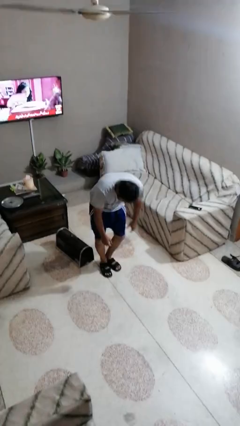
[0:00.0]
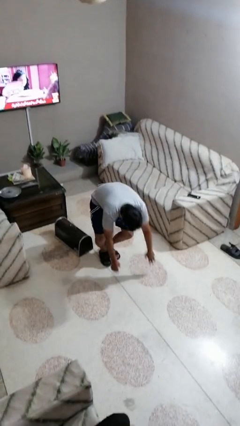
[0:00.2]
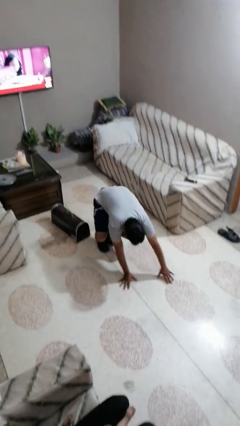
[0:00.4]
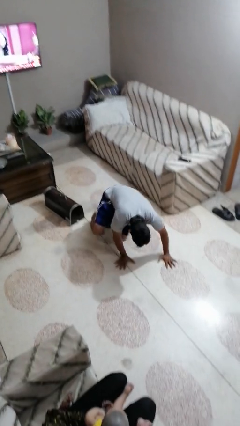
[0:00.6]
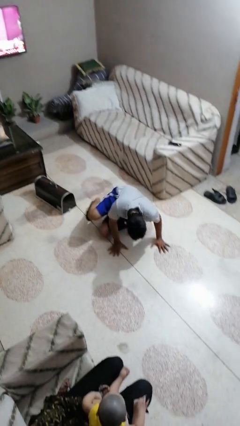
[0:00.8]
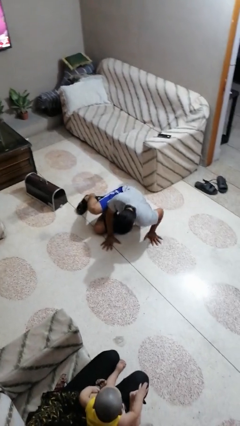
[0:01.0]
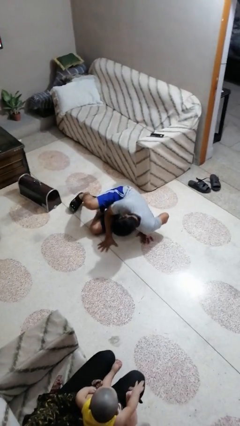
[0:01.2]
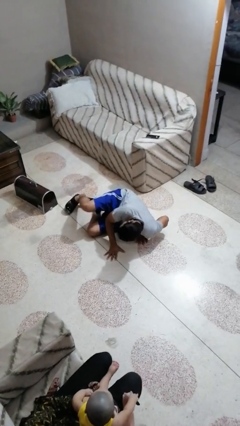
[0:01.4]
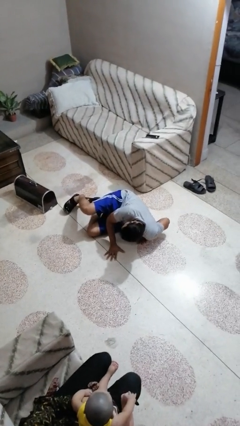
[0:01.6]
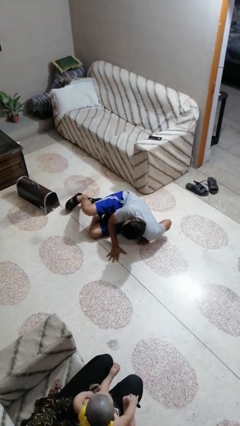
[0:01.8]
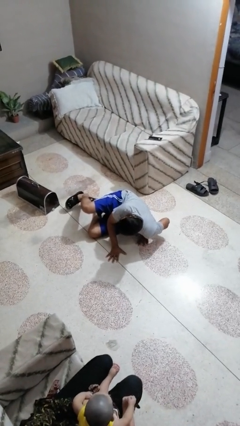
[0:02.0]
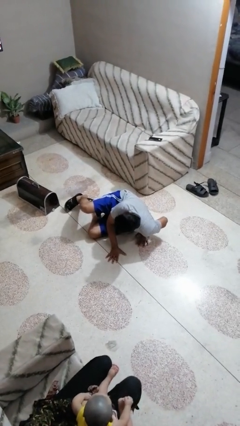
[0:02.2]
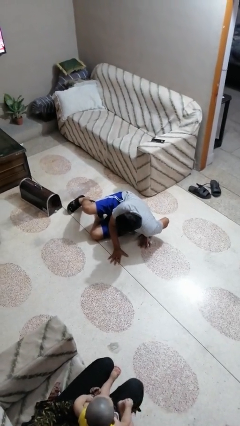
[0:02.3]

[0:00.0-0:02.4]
person lies down on floor

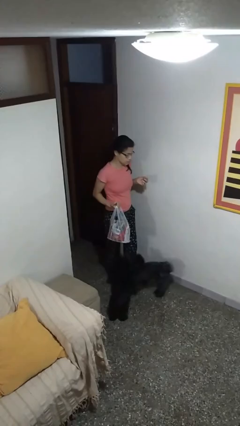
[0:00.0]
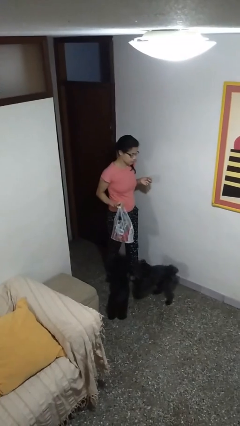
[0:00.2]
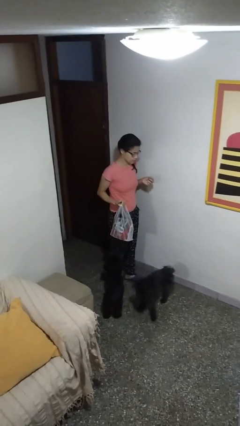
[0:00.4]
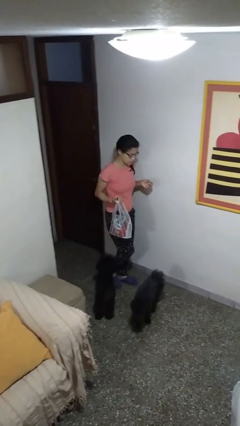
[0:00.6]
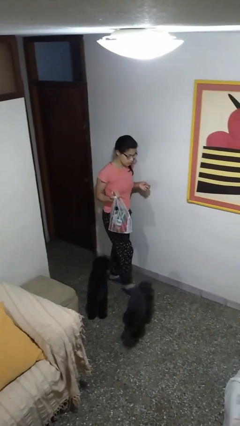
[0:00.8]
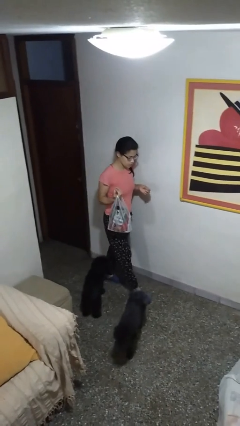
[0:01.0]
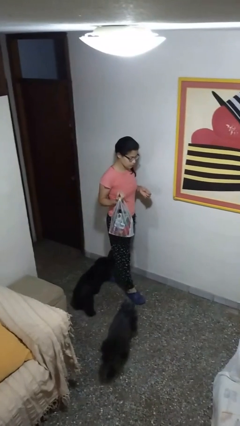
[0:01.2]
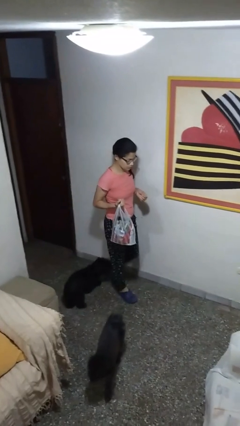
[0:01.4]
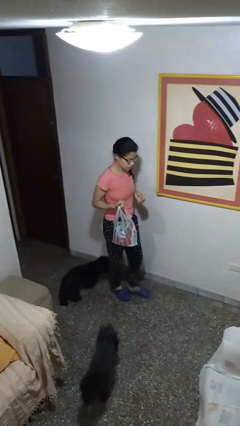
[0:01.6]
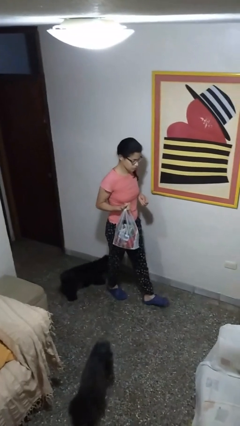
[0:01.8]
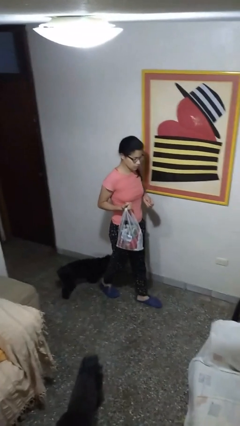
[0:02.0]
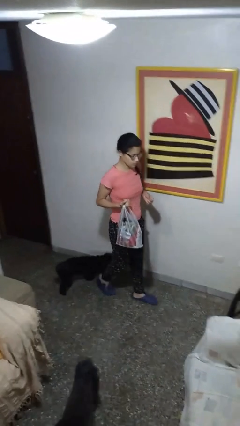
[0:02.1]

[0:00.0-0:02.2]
person carries groceries

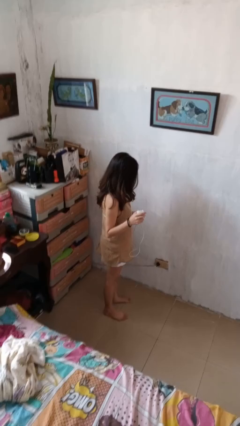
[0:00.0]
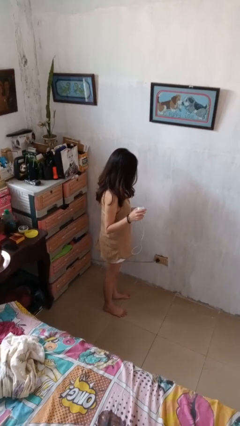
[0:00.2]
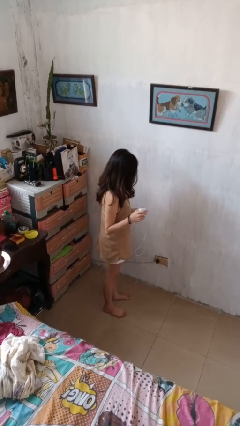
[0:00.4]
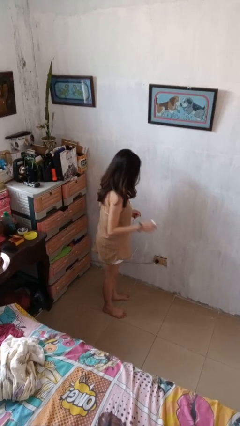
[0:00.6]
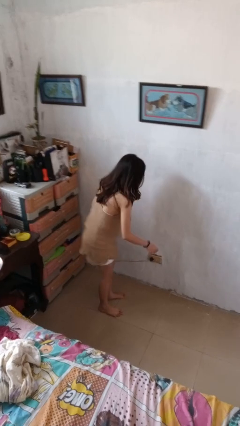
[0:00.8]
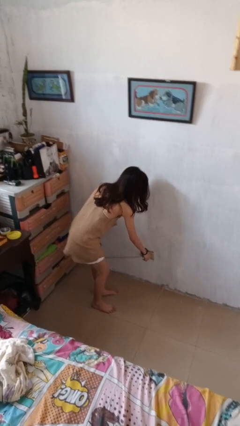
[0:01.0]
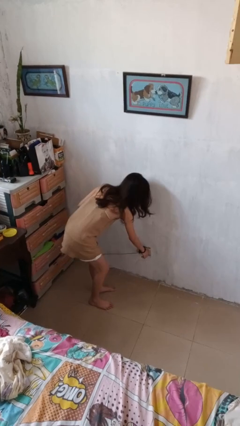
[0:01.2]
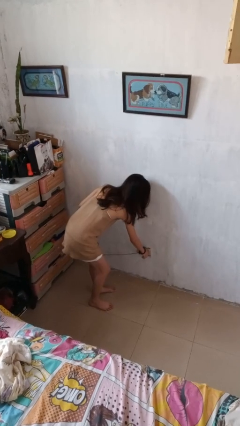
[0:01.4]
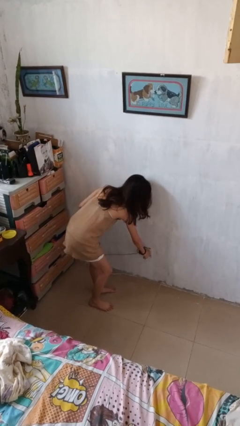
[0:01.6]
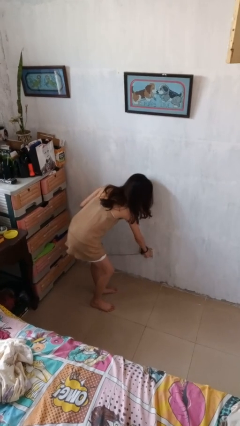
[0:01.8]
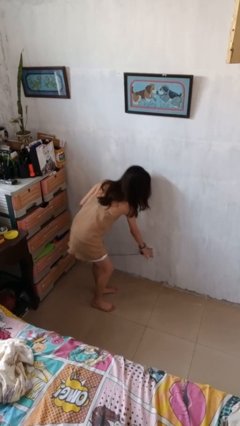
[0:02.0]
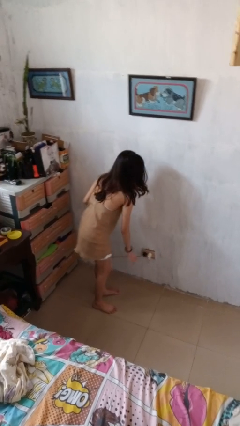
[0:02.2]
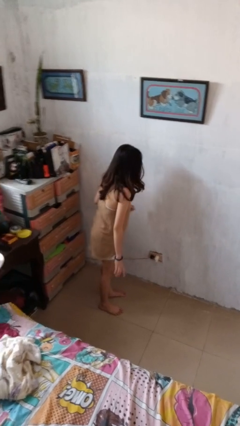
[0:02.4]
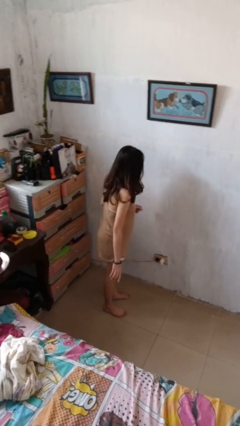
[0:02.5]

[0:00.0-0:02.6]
person plugs into electrical socket

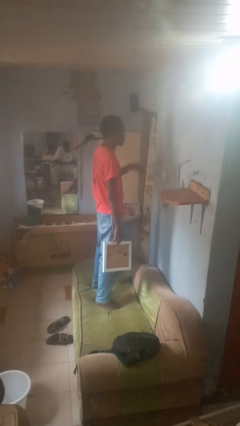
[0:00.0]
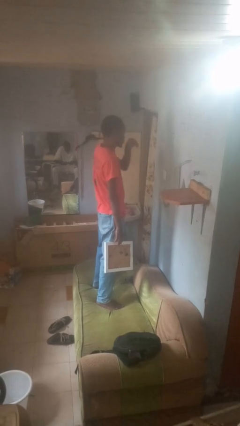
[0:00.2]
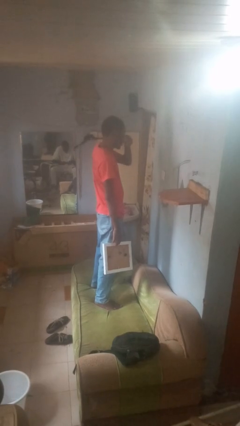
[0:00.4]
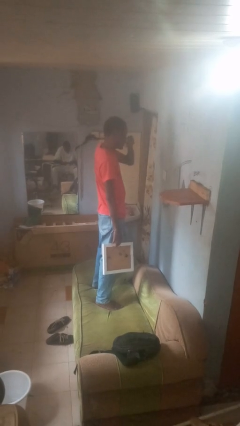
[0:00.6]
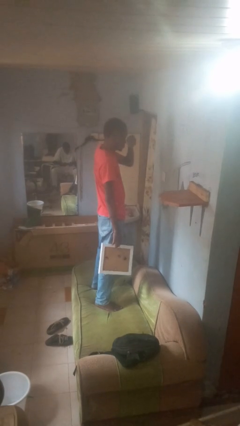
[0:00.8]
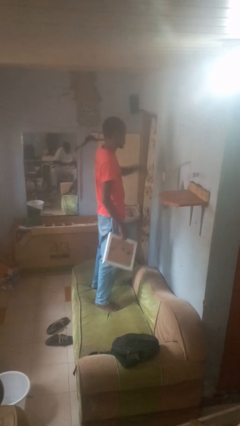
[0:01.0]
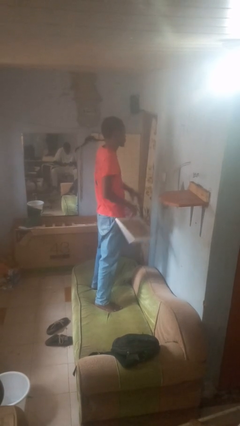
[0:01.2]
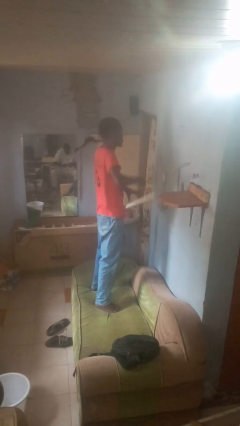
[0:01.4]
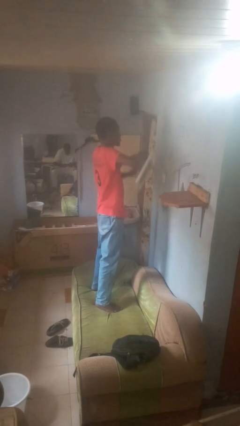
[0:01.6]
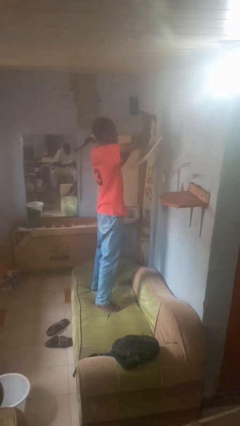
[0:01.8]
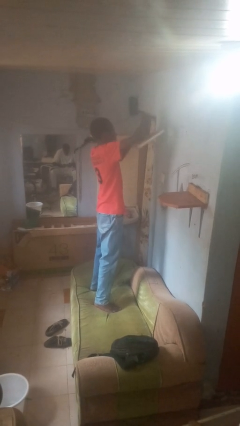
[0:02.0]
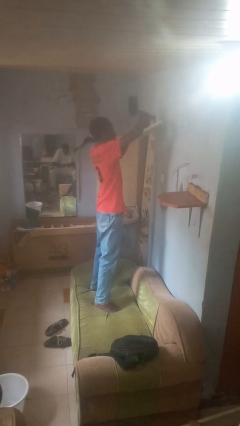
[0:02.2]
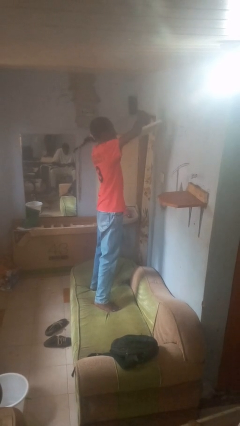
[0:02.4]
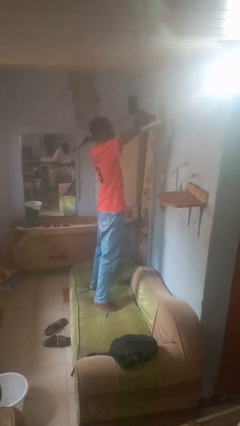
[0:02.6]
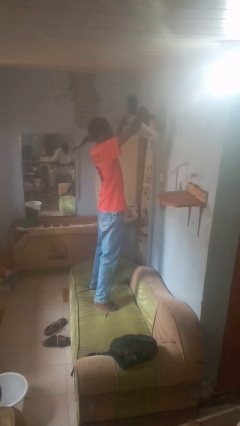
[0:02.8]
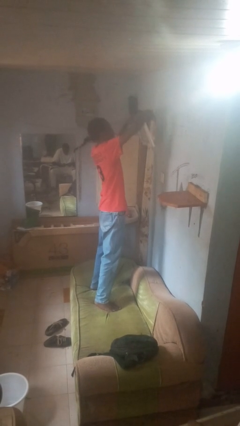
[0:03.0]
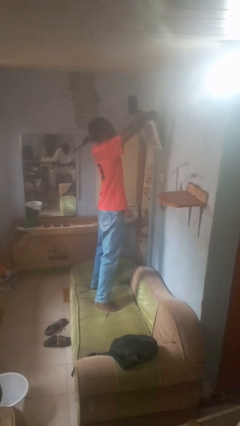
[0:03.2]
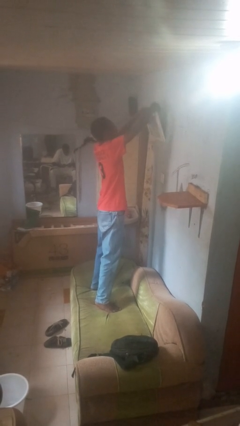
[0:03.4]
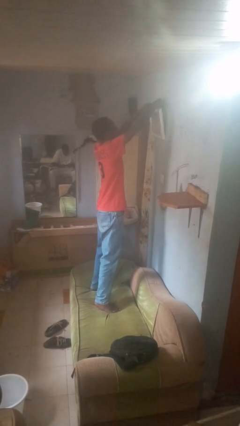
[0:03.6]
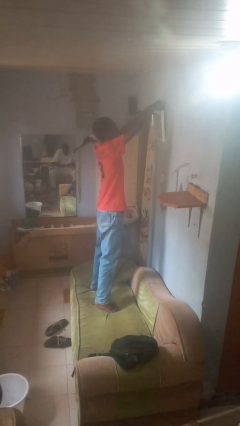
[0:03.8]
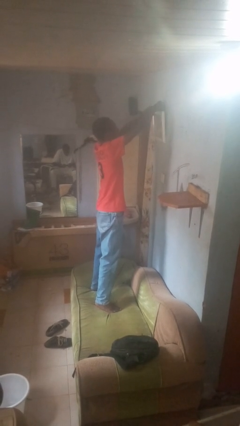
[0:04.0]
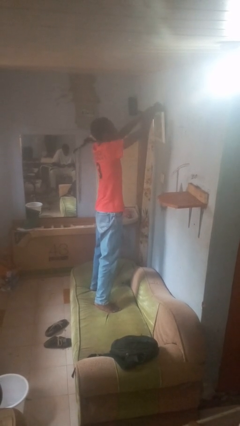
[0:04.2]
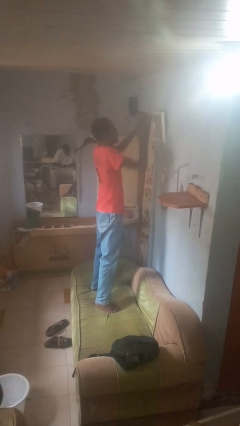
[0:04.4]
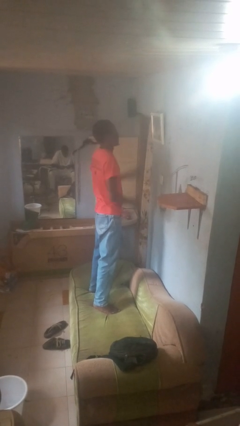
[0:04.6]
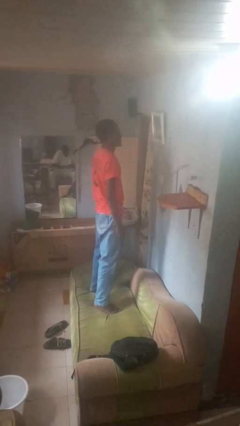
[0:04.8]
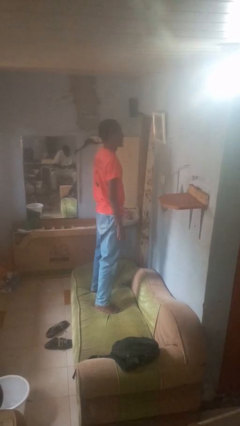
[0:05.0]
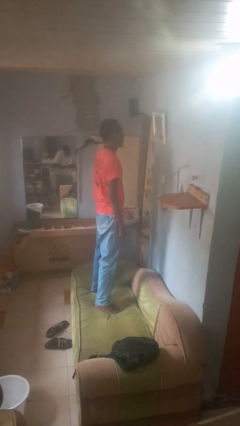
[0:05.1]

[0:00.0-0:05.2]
person puts up picture frame

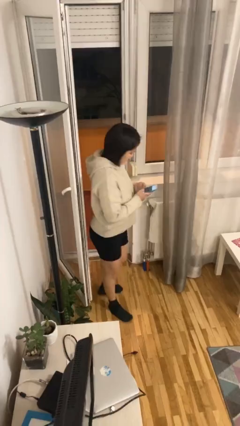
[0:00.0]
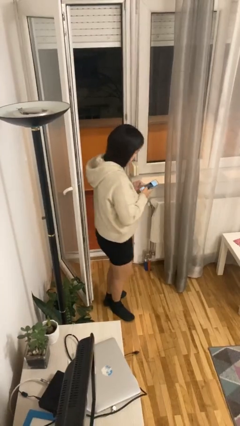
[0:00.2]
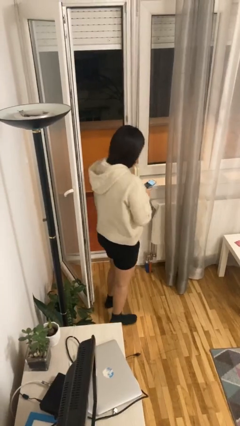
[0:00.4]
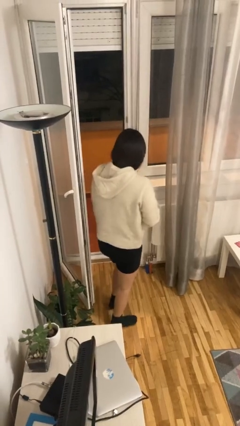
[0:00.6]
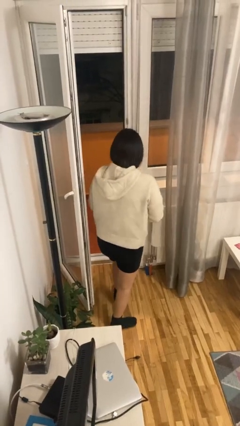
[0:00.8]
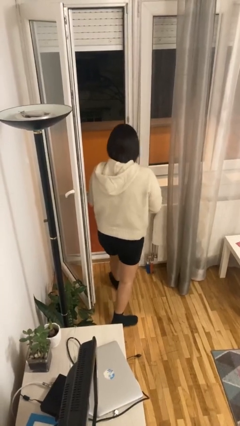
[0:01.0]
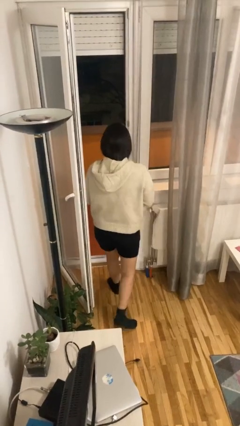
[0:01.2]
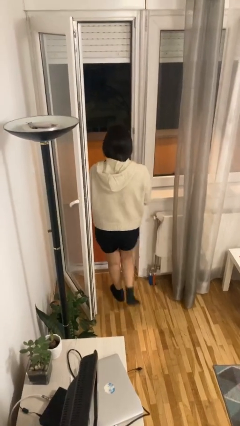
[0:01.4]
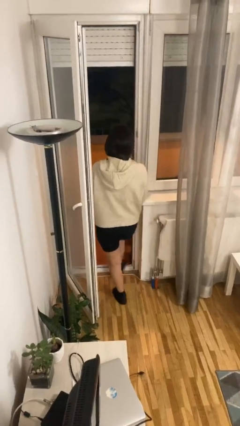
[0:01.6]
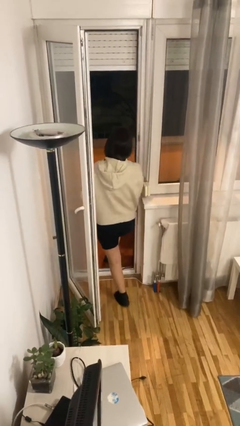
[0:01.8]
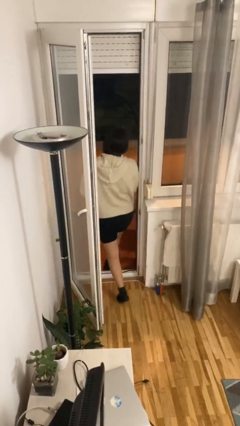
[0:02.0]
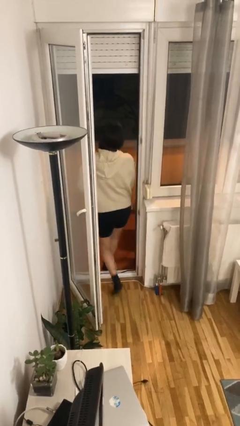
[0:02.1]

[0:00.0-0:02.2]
person exits scene through structure

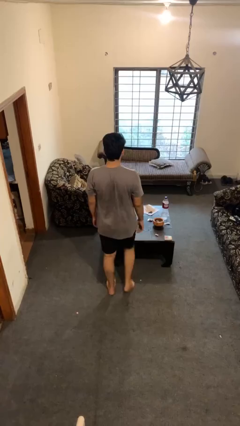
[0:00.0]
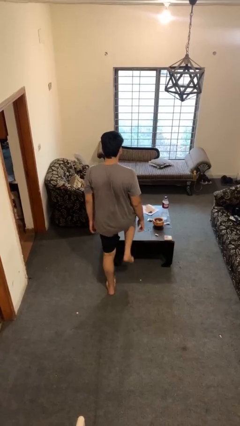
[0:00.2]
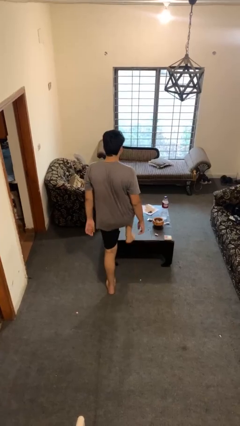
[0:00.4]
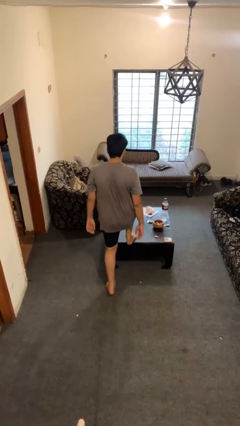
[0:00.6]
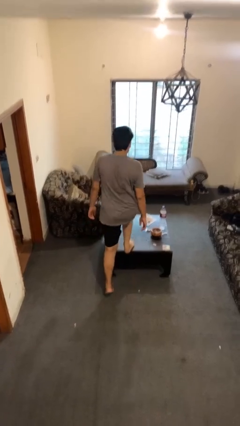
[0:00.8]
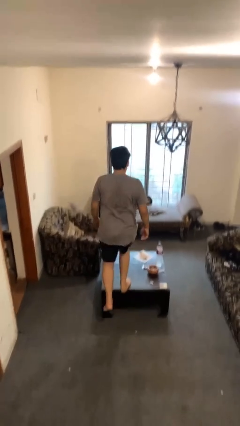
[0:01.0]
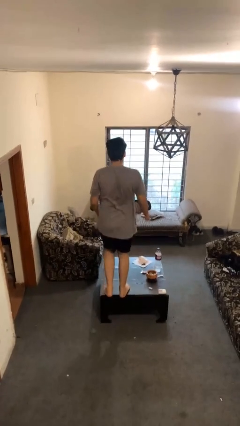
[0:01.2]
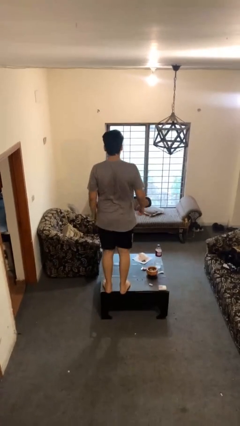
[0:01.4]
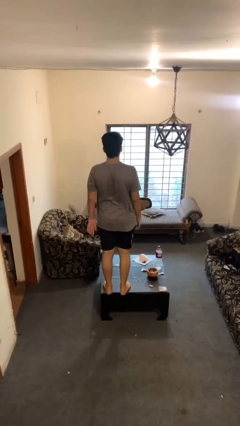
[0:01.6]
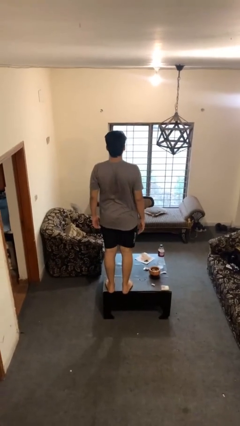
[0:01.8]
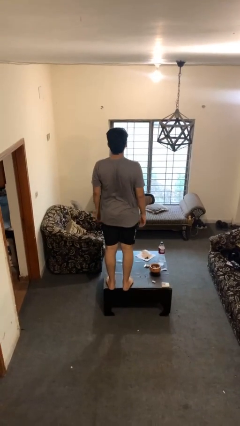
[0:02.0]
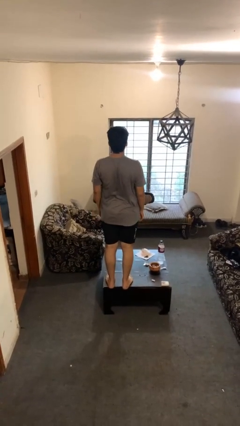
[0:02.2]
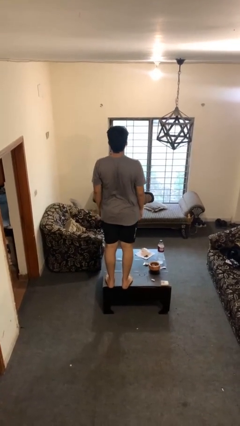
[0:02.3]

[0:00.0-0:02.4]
person climbs on table

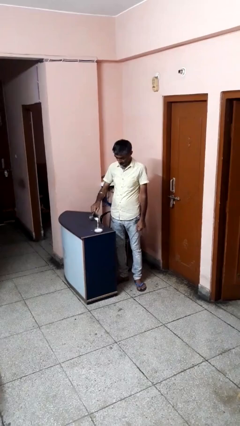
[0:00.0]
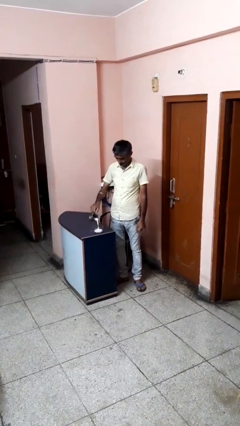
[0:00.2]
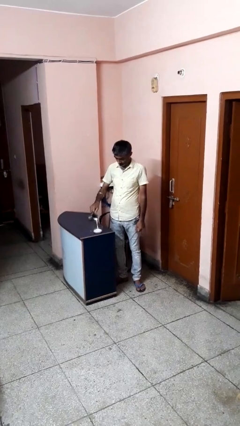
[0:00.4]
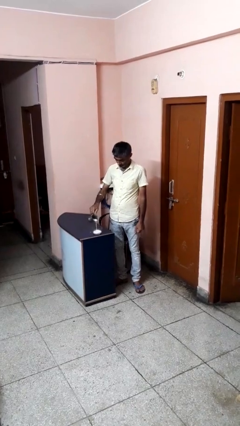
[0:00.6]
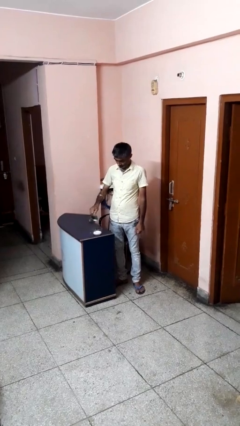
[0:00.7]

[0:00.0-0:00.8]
person pours into bowl
